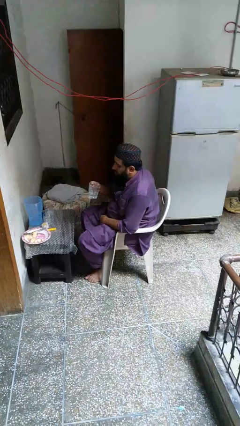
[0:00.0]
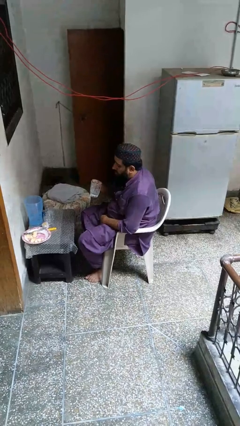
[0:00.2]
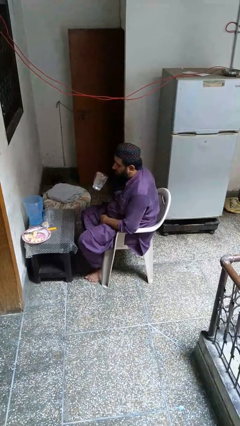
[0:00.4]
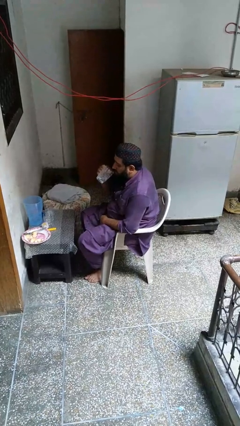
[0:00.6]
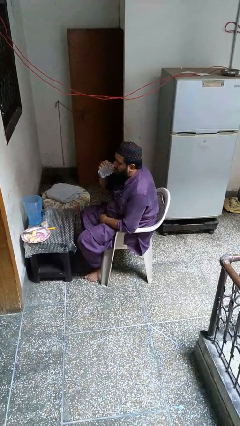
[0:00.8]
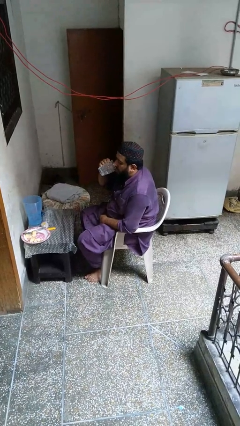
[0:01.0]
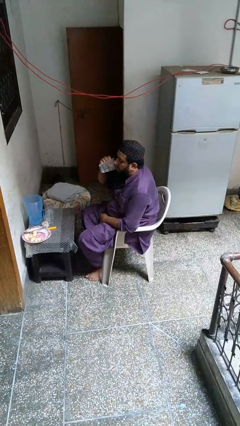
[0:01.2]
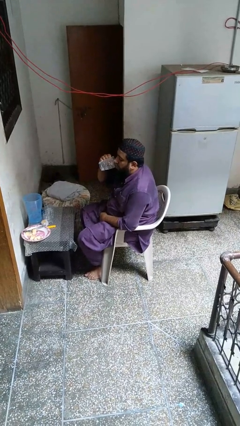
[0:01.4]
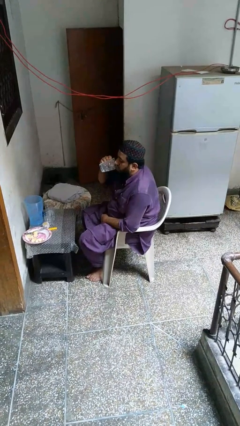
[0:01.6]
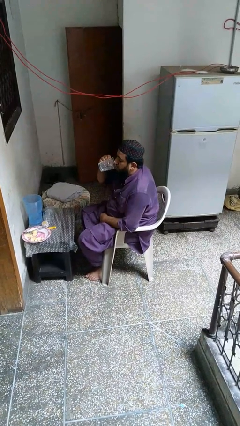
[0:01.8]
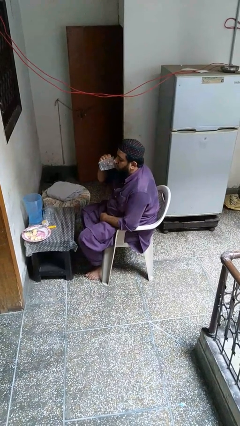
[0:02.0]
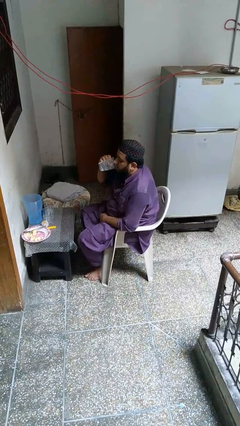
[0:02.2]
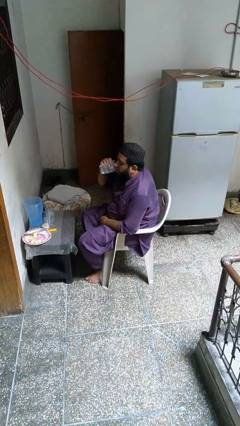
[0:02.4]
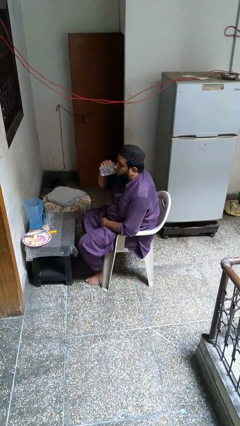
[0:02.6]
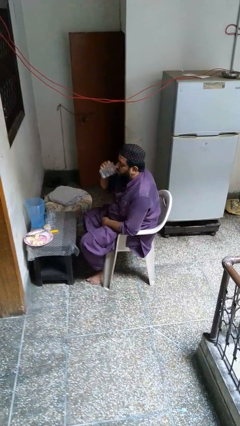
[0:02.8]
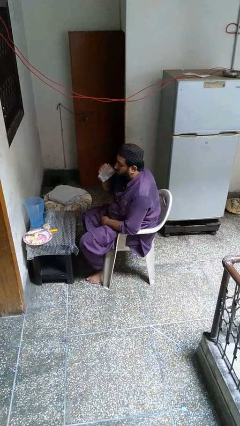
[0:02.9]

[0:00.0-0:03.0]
person drinks from mug

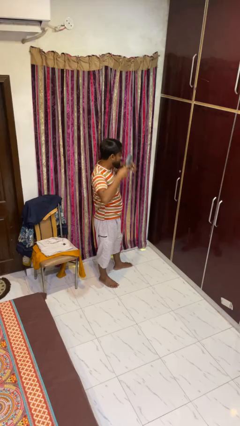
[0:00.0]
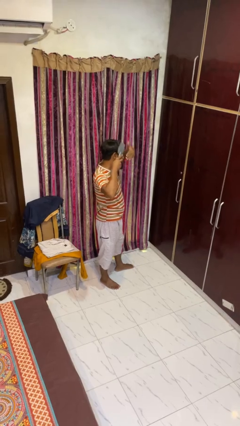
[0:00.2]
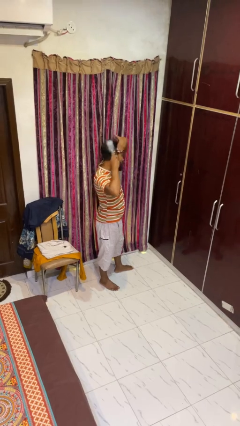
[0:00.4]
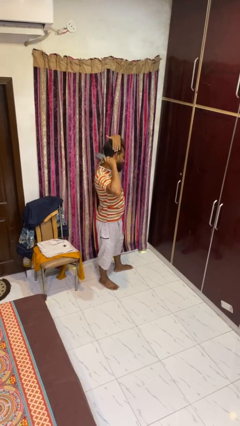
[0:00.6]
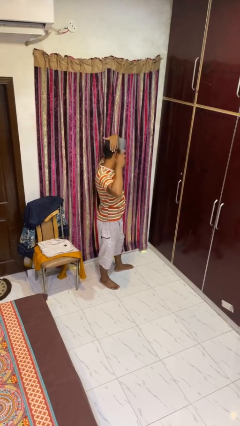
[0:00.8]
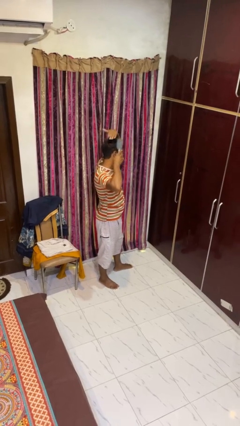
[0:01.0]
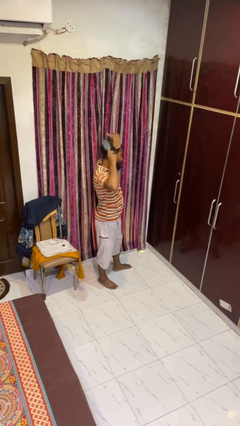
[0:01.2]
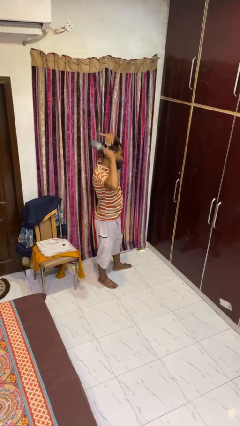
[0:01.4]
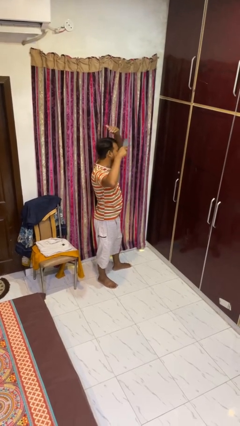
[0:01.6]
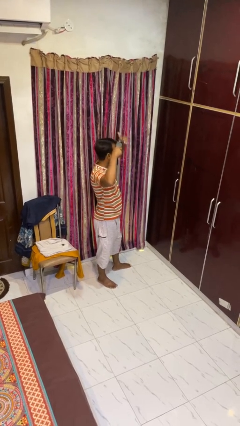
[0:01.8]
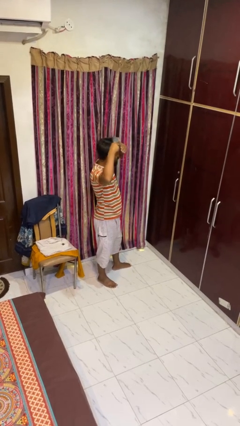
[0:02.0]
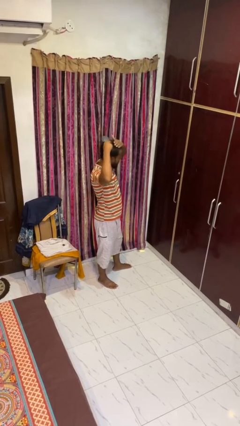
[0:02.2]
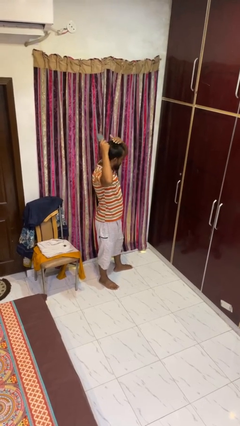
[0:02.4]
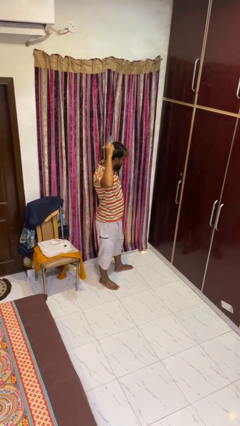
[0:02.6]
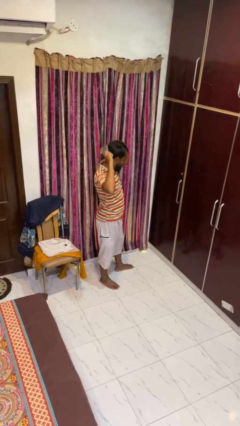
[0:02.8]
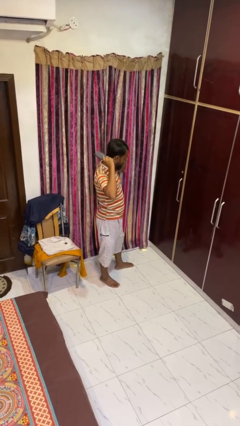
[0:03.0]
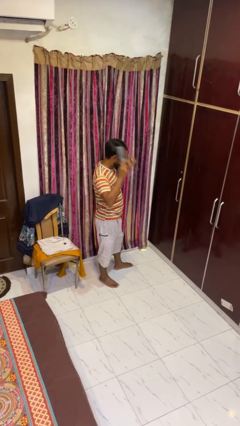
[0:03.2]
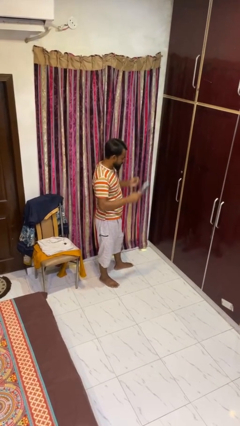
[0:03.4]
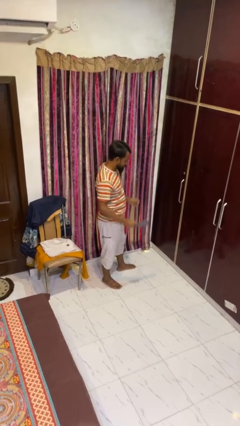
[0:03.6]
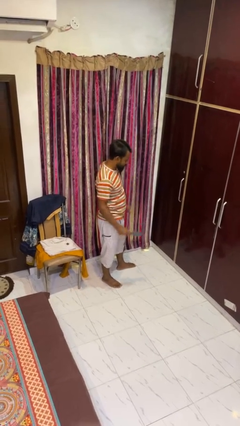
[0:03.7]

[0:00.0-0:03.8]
person brushes hair

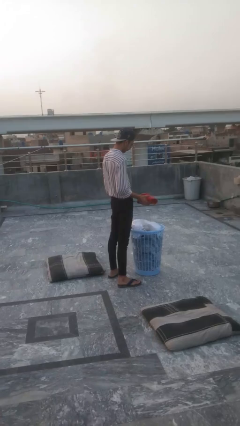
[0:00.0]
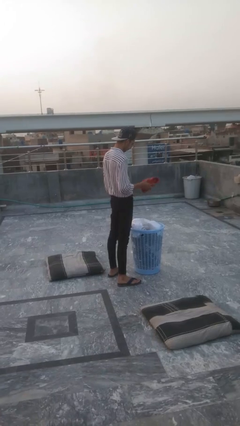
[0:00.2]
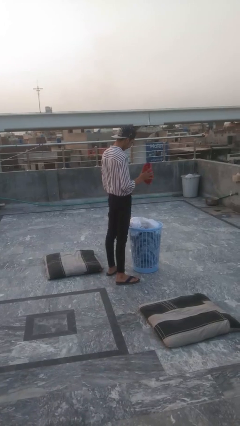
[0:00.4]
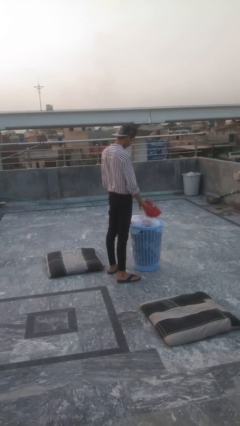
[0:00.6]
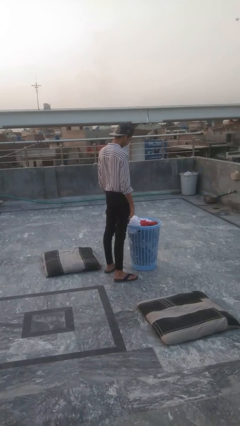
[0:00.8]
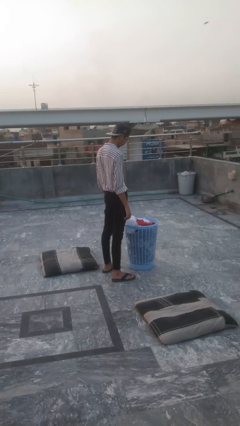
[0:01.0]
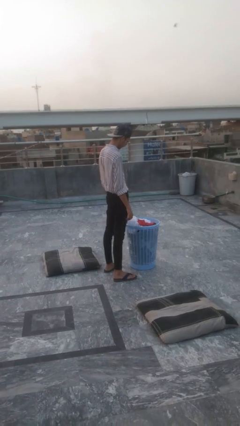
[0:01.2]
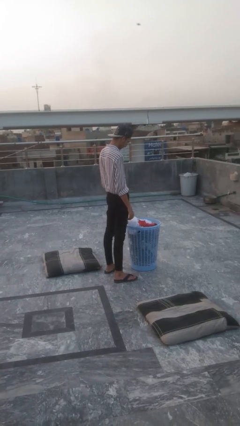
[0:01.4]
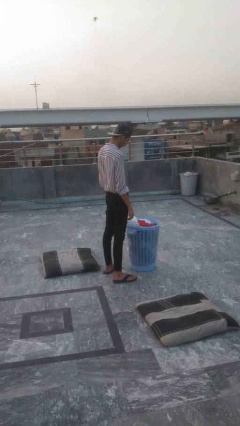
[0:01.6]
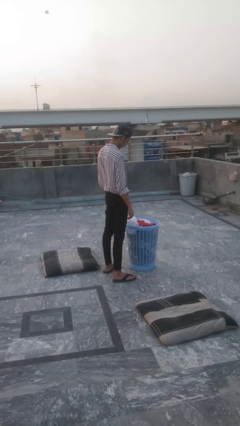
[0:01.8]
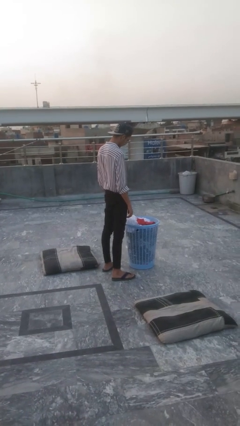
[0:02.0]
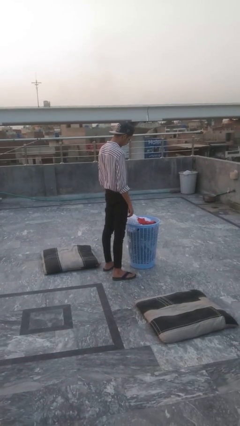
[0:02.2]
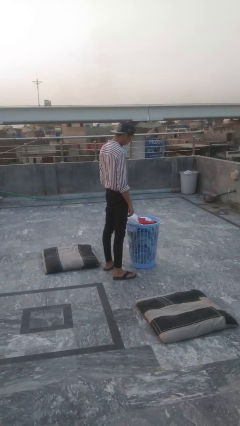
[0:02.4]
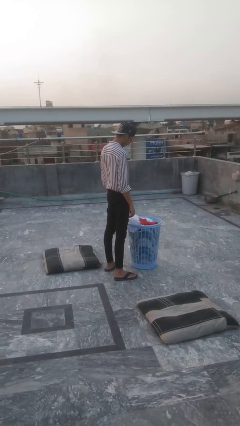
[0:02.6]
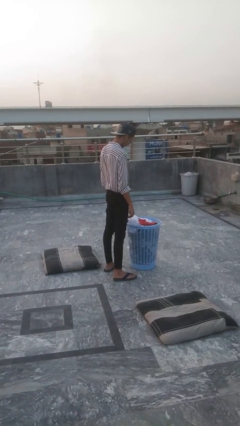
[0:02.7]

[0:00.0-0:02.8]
person puts object into basket

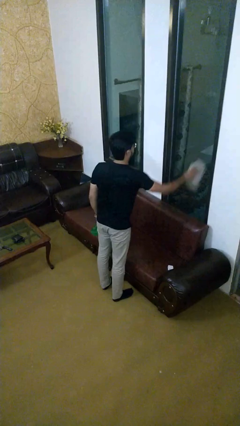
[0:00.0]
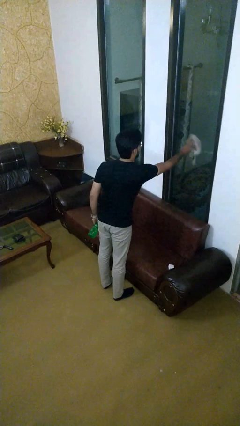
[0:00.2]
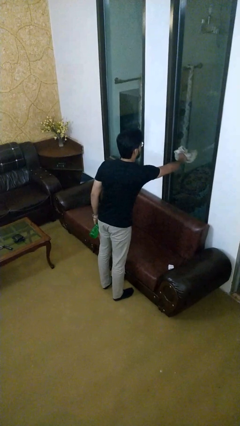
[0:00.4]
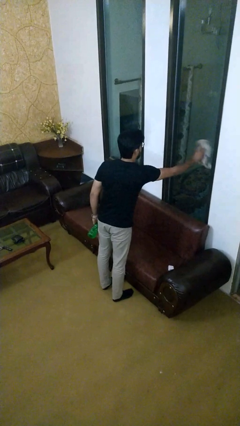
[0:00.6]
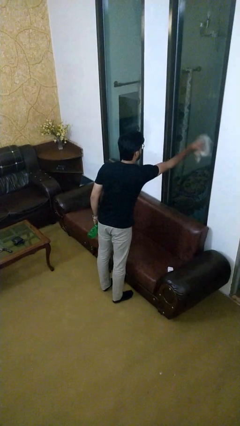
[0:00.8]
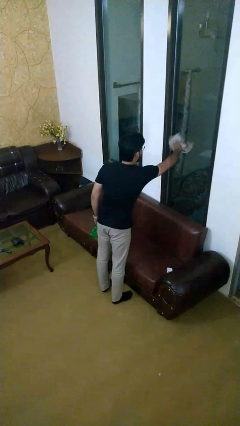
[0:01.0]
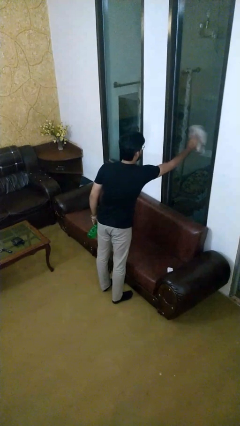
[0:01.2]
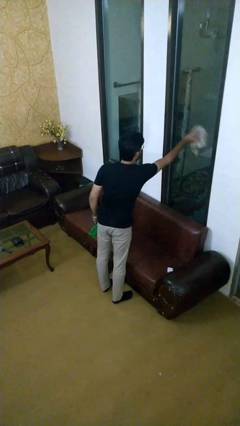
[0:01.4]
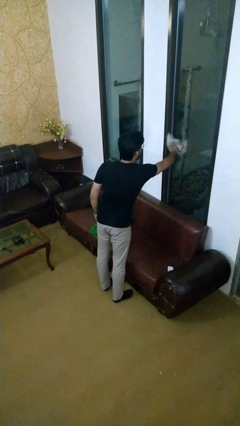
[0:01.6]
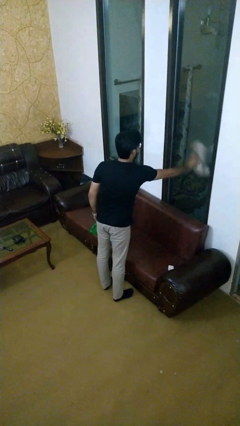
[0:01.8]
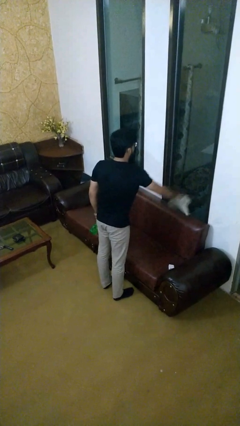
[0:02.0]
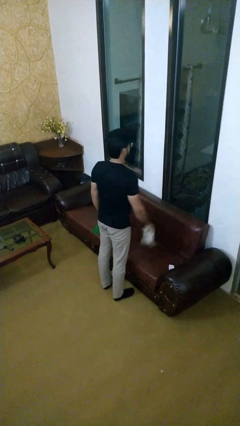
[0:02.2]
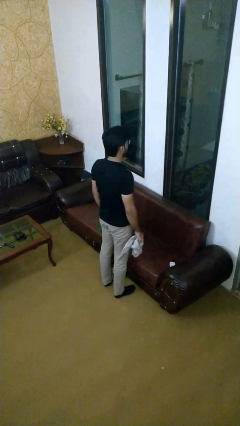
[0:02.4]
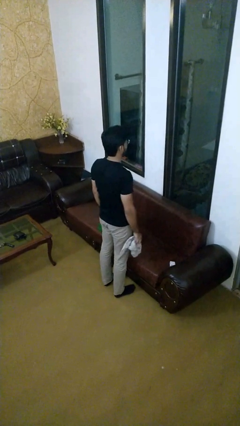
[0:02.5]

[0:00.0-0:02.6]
person washes window

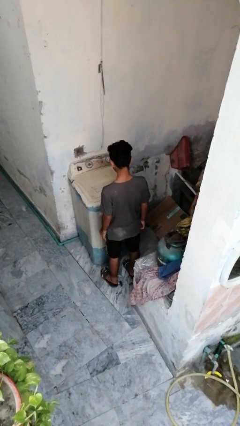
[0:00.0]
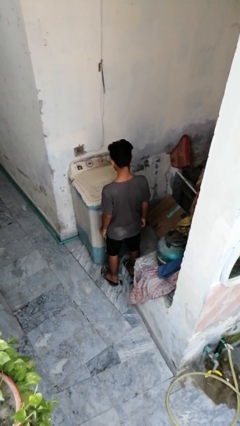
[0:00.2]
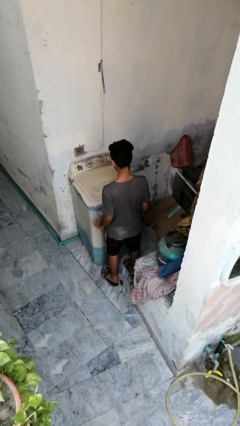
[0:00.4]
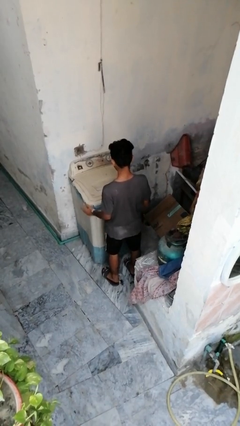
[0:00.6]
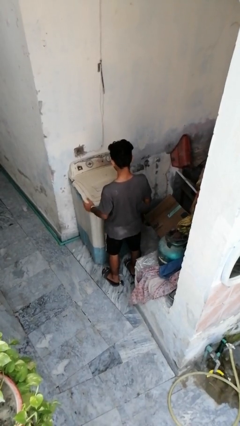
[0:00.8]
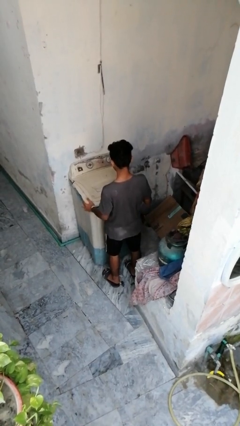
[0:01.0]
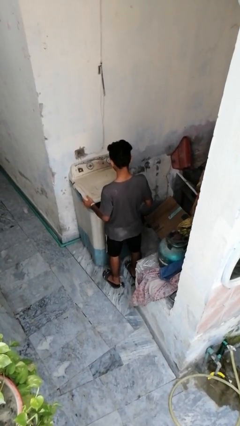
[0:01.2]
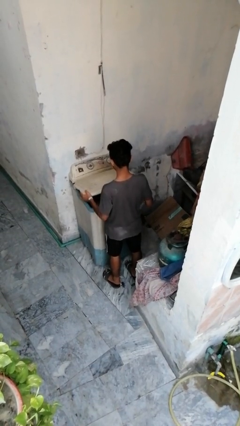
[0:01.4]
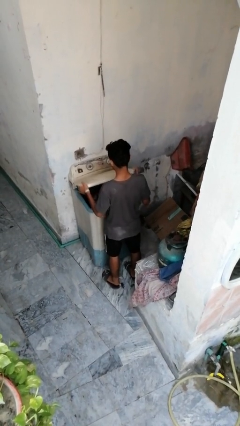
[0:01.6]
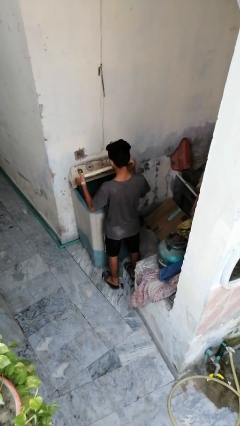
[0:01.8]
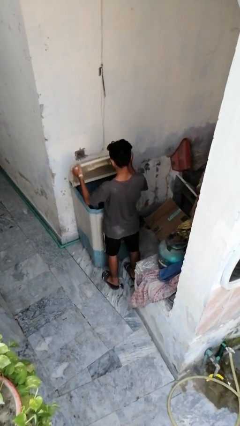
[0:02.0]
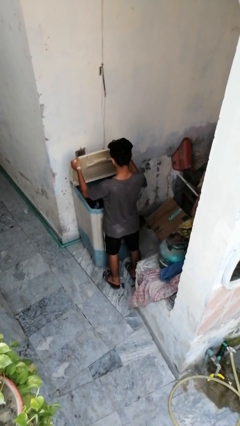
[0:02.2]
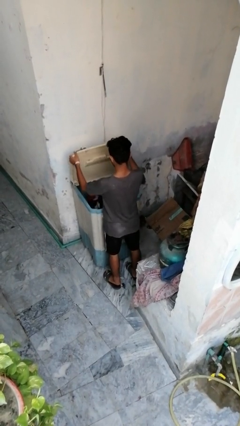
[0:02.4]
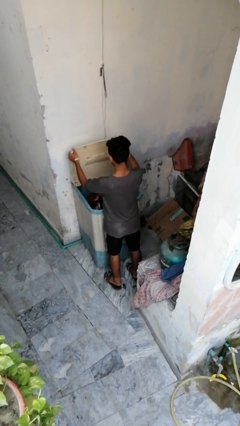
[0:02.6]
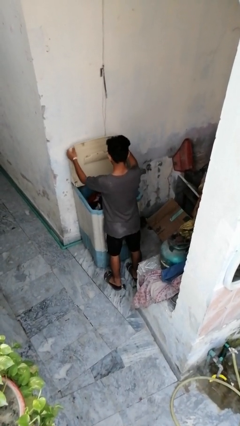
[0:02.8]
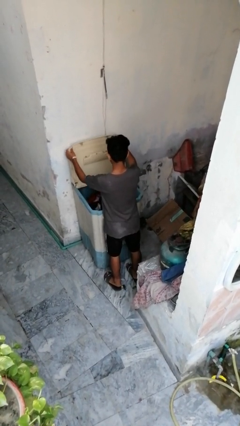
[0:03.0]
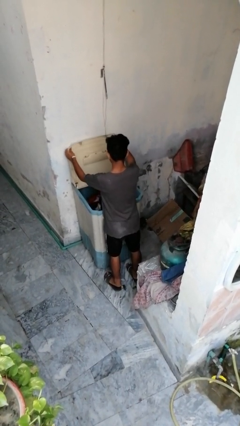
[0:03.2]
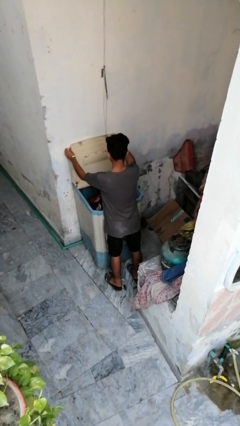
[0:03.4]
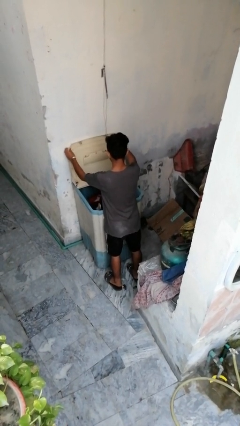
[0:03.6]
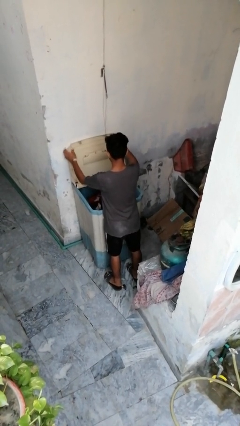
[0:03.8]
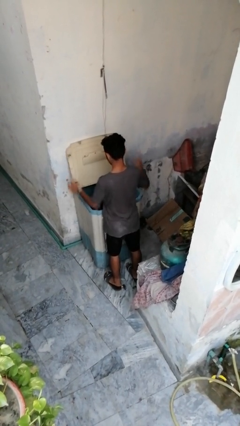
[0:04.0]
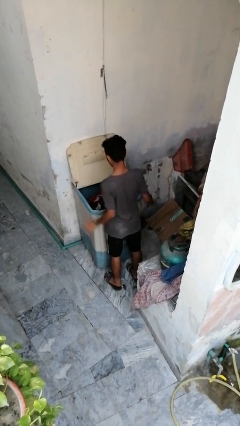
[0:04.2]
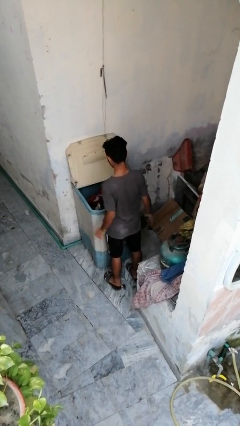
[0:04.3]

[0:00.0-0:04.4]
person opens clothes washer

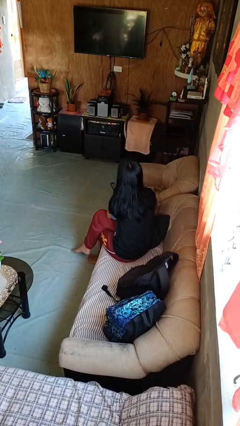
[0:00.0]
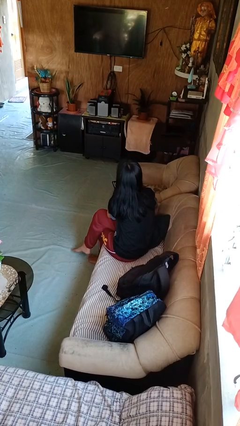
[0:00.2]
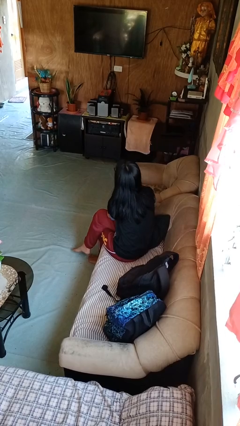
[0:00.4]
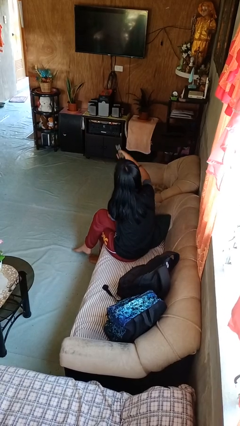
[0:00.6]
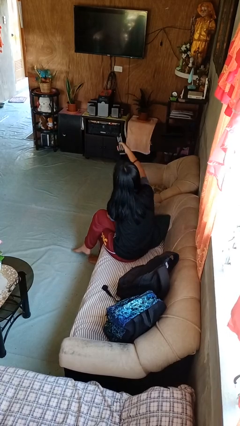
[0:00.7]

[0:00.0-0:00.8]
person uses television remote
